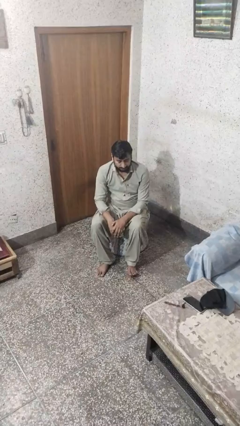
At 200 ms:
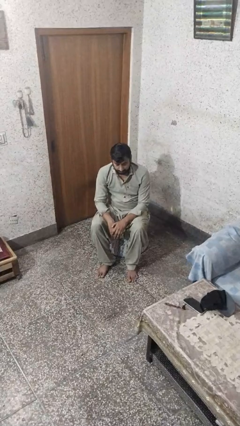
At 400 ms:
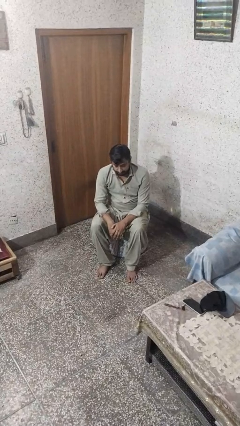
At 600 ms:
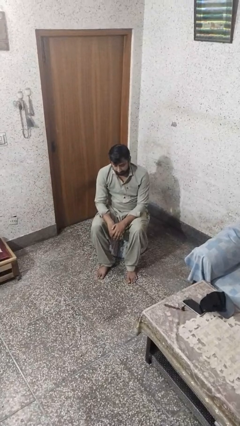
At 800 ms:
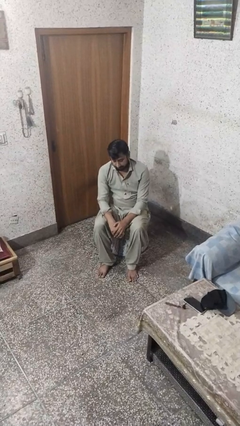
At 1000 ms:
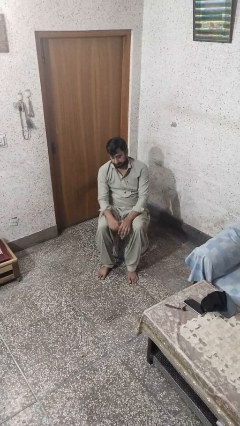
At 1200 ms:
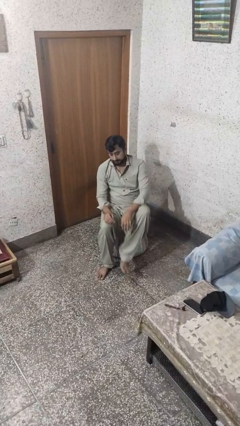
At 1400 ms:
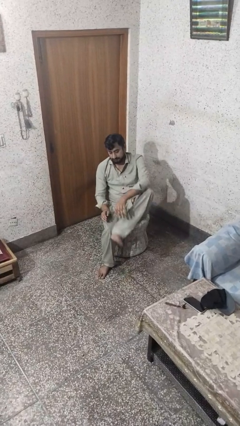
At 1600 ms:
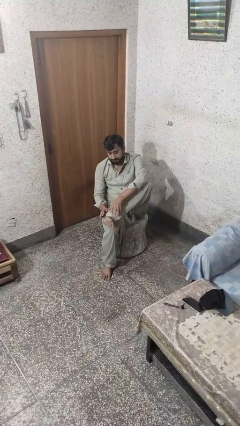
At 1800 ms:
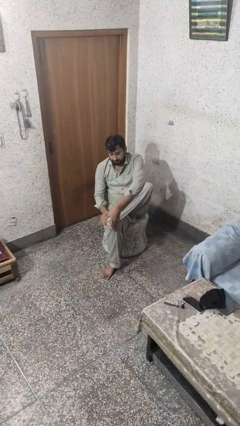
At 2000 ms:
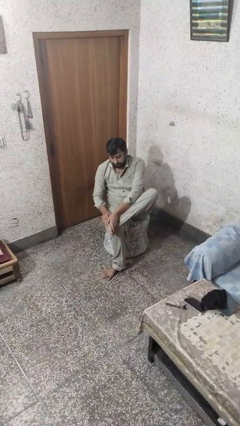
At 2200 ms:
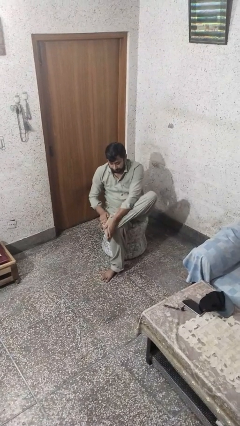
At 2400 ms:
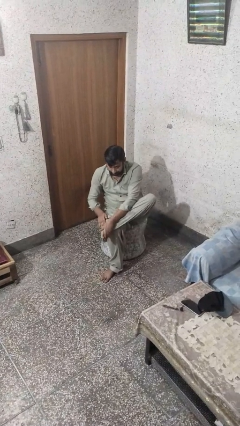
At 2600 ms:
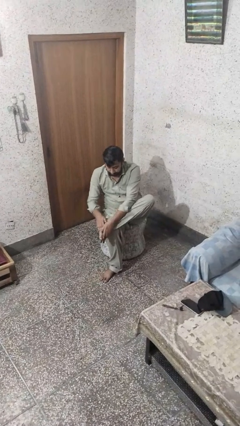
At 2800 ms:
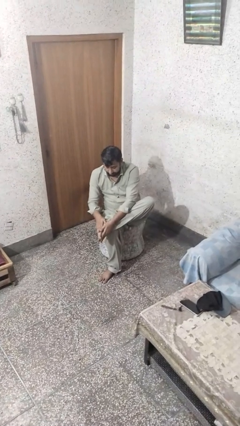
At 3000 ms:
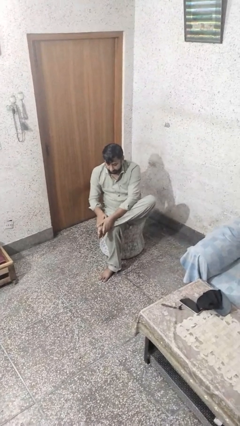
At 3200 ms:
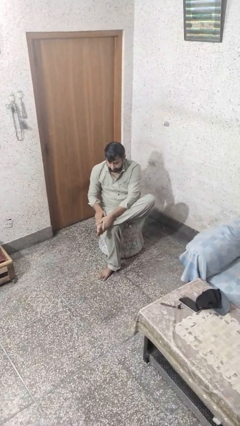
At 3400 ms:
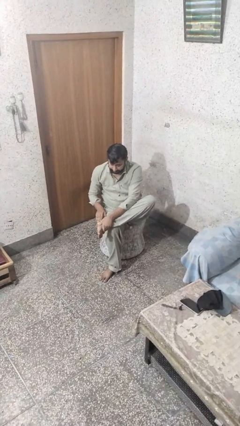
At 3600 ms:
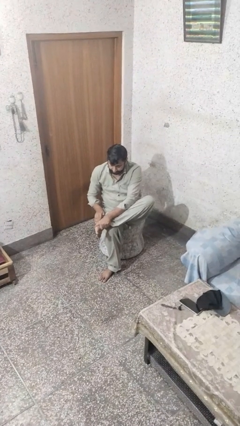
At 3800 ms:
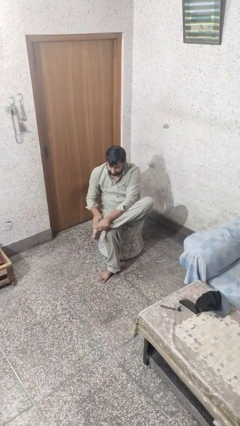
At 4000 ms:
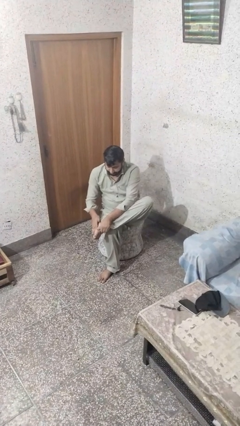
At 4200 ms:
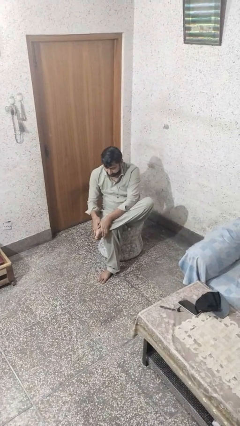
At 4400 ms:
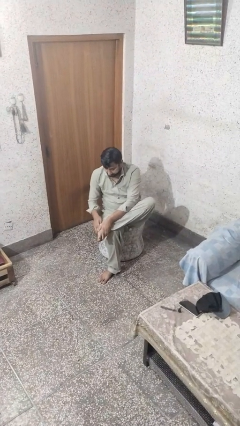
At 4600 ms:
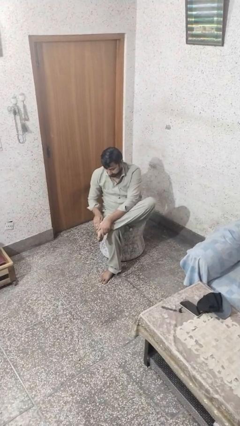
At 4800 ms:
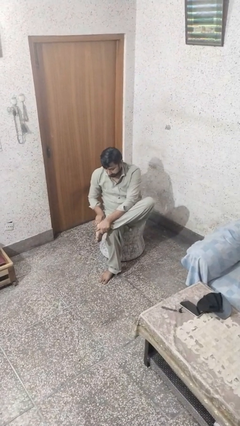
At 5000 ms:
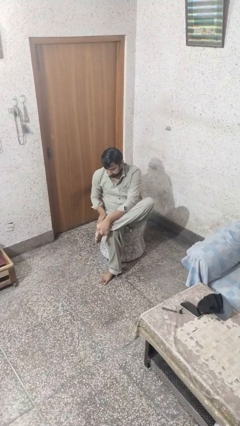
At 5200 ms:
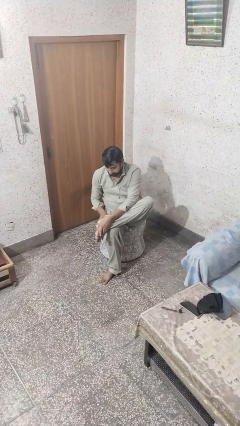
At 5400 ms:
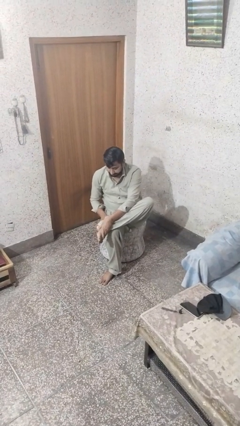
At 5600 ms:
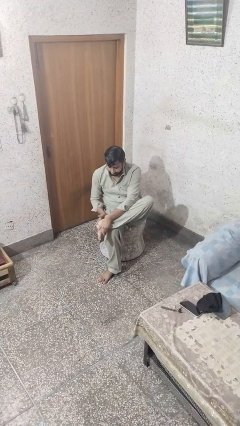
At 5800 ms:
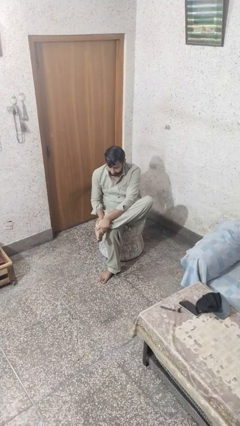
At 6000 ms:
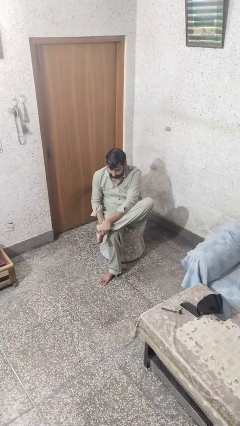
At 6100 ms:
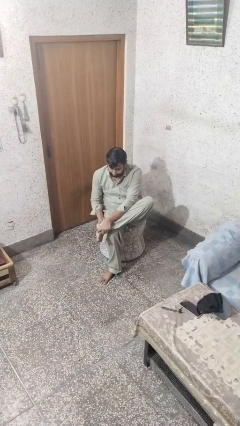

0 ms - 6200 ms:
person rubs foot

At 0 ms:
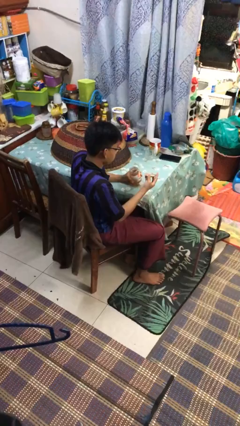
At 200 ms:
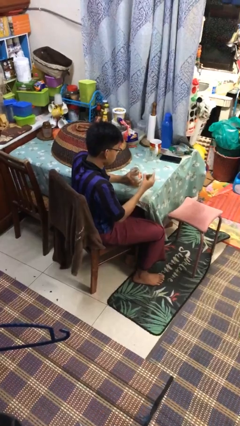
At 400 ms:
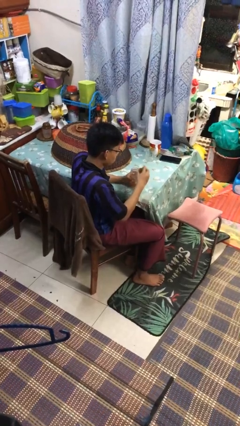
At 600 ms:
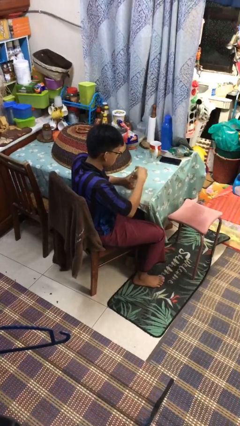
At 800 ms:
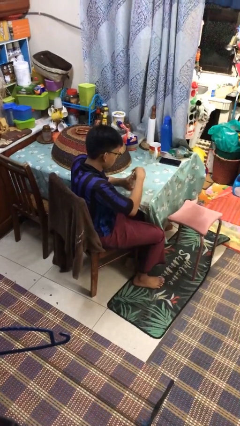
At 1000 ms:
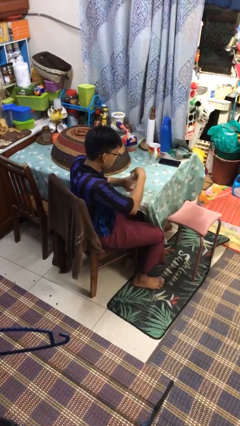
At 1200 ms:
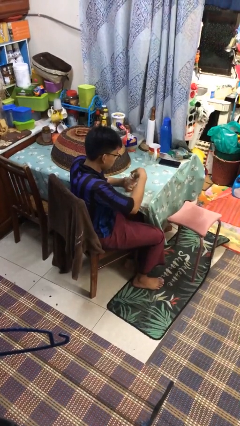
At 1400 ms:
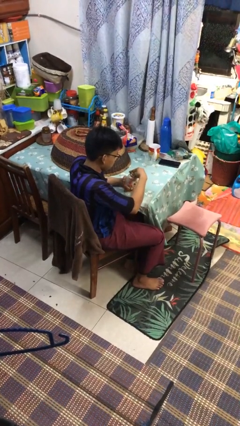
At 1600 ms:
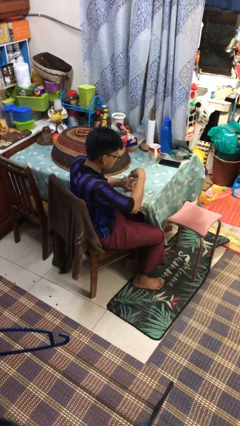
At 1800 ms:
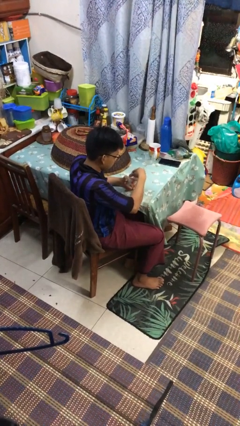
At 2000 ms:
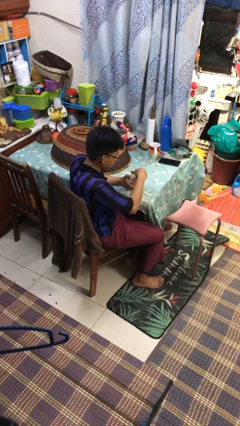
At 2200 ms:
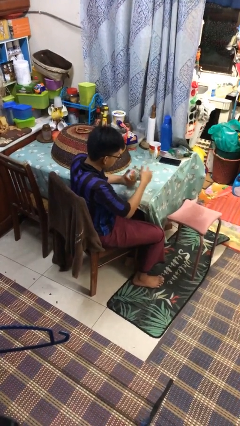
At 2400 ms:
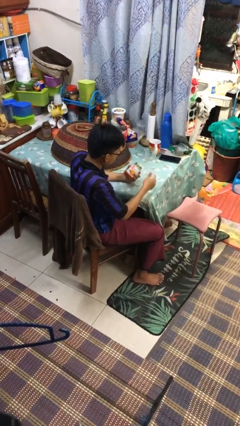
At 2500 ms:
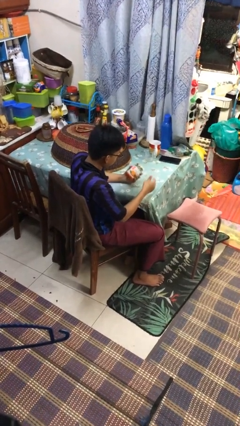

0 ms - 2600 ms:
person closes jar

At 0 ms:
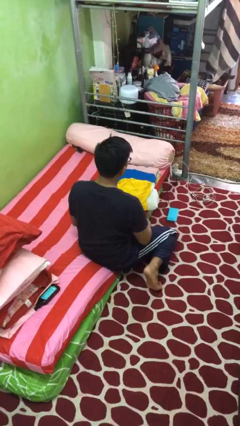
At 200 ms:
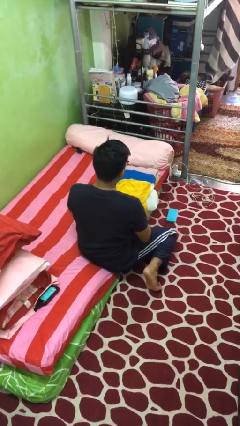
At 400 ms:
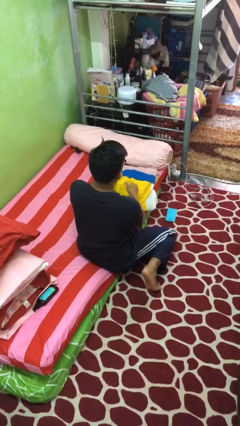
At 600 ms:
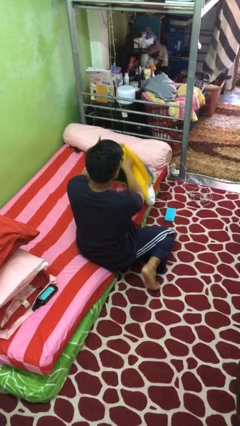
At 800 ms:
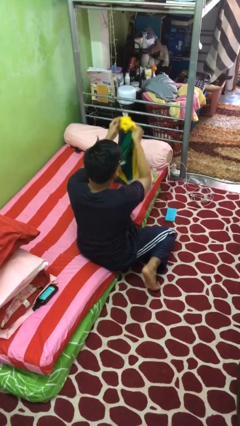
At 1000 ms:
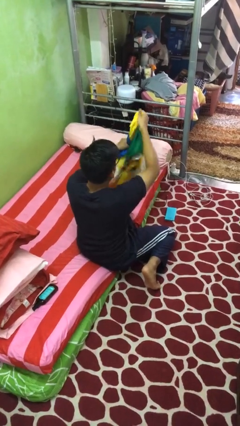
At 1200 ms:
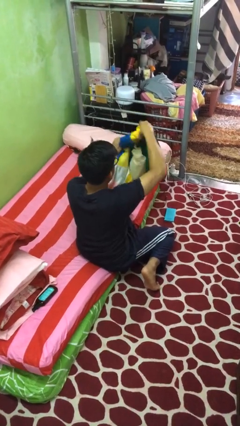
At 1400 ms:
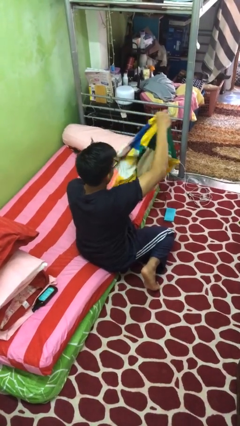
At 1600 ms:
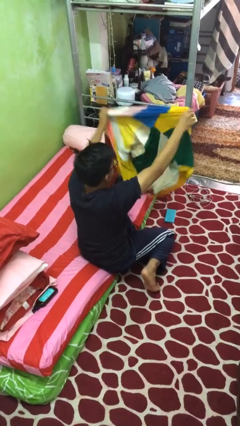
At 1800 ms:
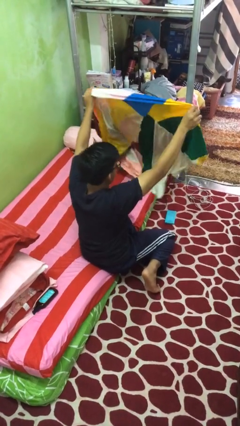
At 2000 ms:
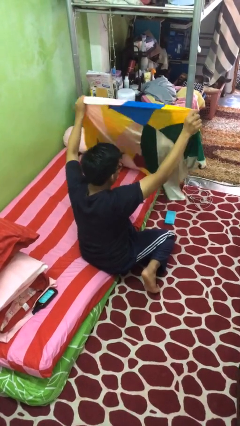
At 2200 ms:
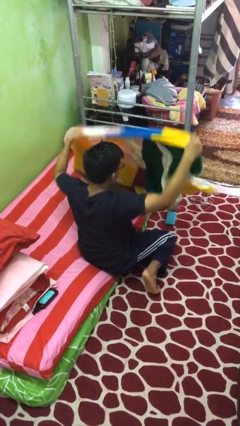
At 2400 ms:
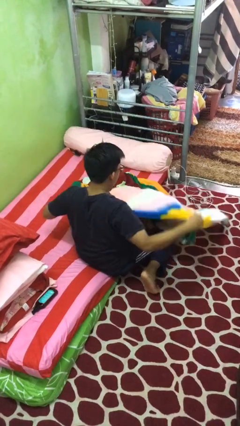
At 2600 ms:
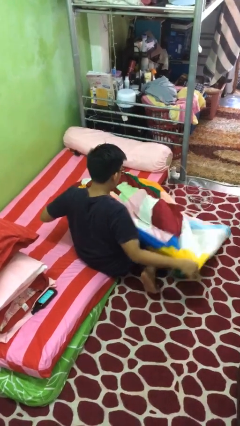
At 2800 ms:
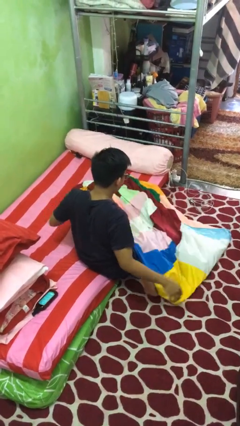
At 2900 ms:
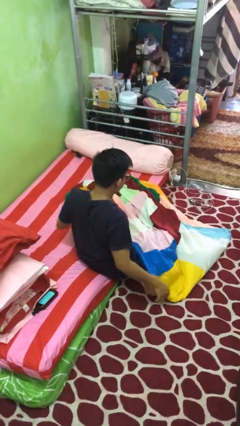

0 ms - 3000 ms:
person unfolds blanket

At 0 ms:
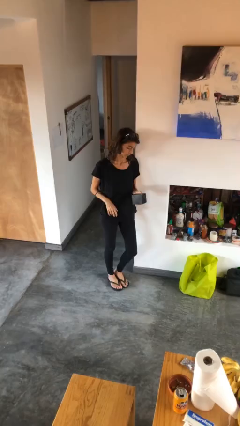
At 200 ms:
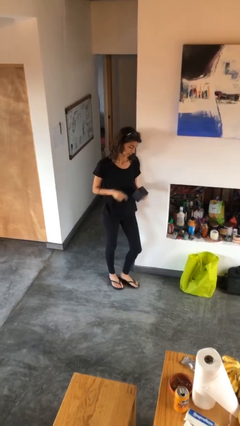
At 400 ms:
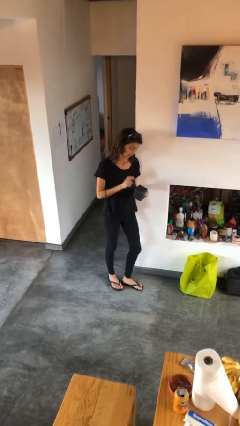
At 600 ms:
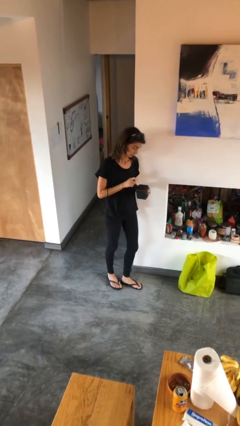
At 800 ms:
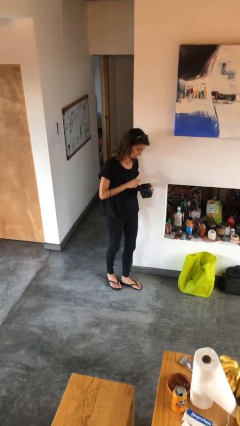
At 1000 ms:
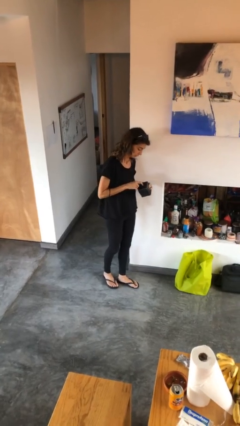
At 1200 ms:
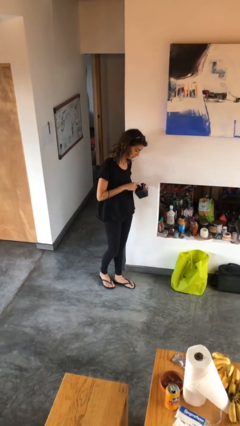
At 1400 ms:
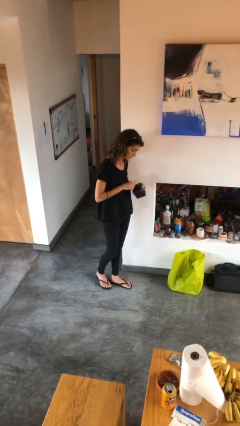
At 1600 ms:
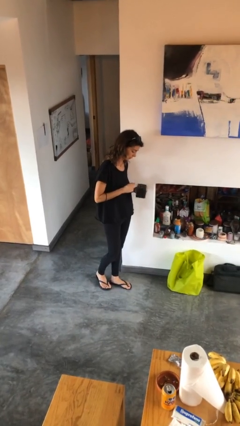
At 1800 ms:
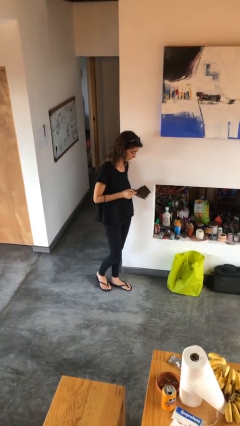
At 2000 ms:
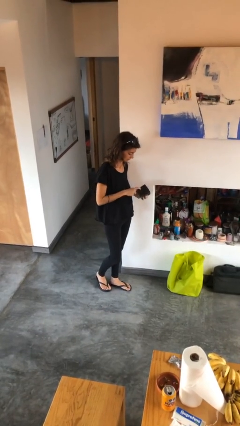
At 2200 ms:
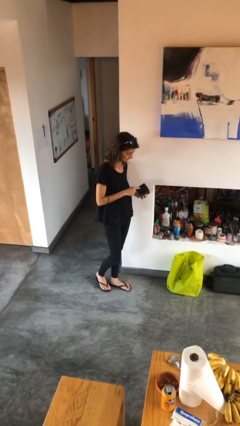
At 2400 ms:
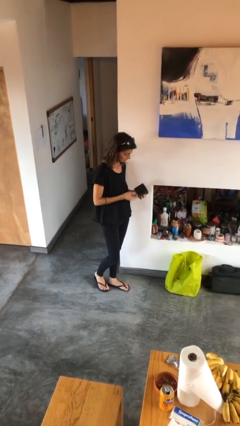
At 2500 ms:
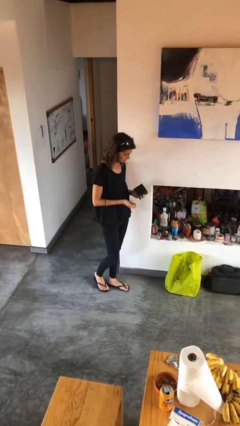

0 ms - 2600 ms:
person taps object with finger

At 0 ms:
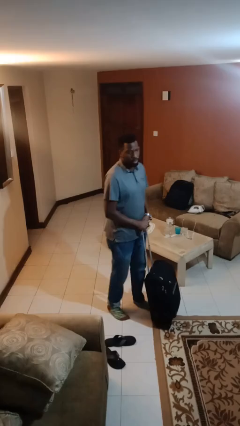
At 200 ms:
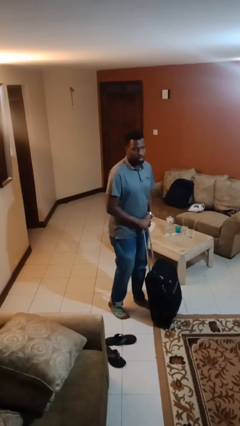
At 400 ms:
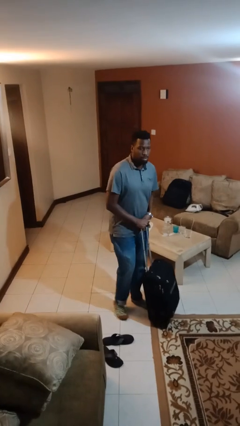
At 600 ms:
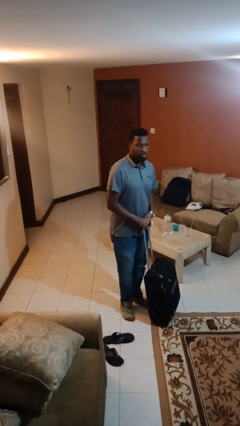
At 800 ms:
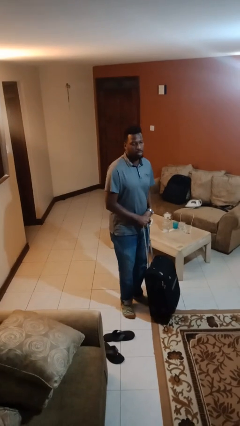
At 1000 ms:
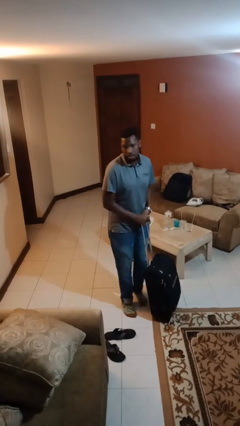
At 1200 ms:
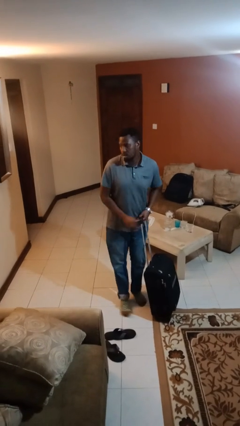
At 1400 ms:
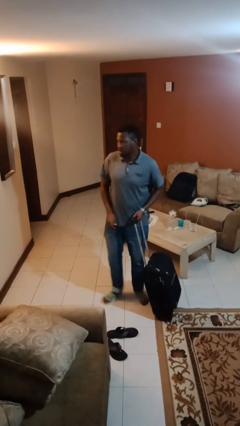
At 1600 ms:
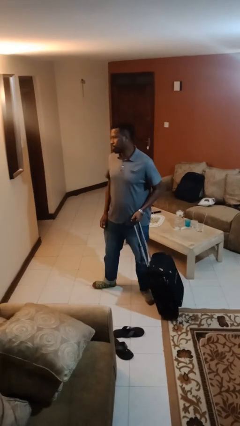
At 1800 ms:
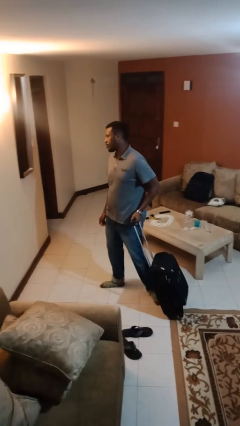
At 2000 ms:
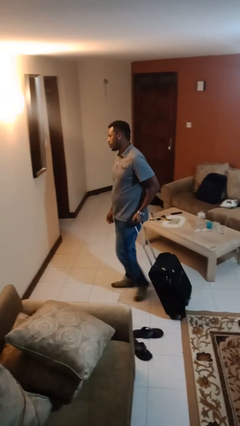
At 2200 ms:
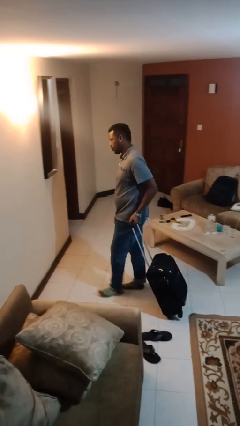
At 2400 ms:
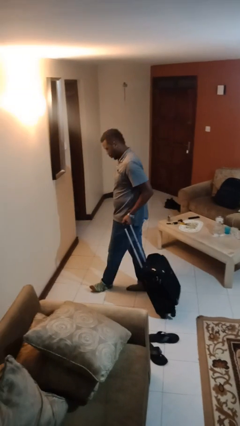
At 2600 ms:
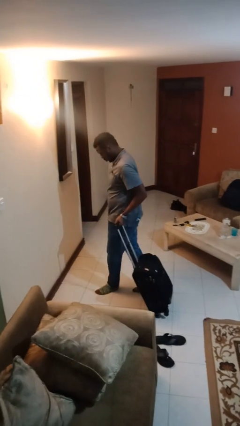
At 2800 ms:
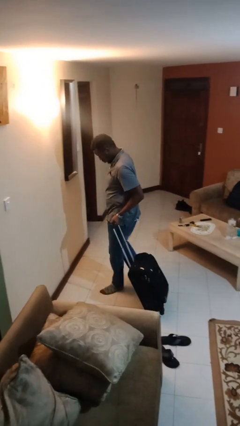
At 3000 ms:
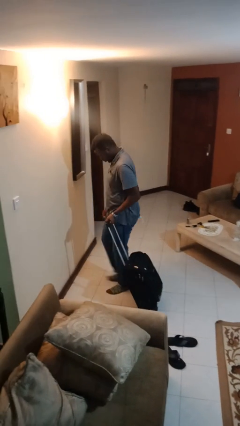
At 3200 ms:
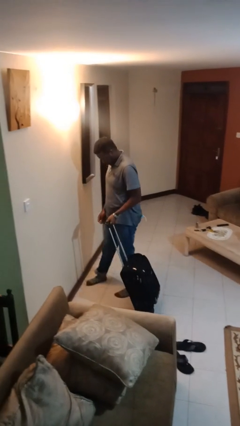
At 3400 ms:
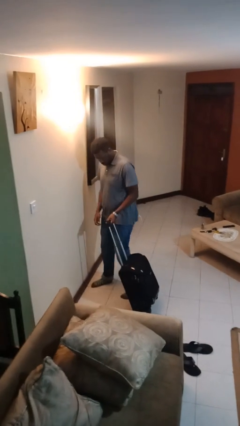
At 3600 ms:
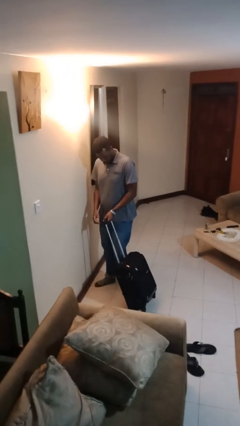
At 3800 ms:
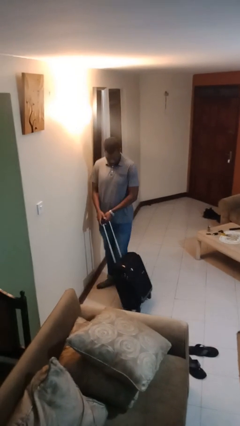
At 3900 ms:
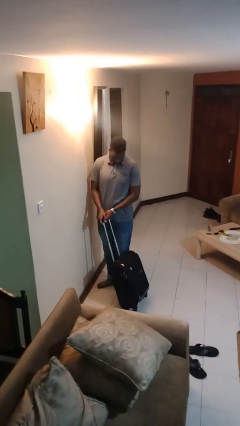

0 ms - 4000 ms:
person pulls wheeled cart
